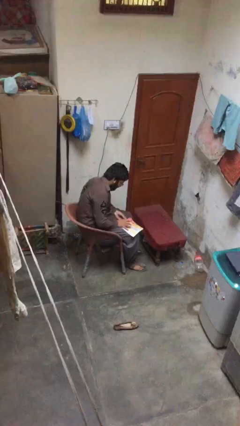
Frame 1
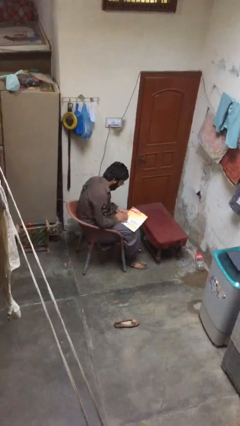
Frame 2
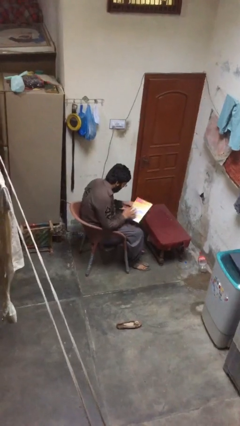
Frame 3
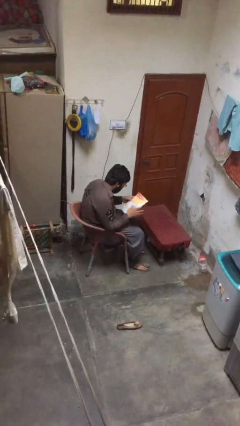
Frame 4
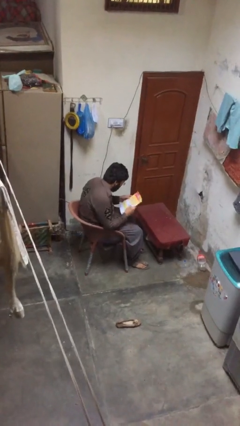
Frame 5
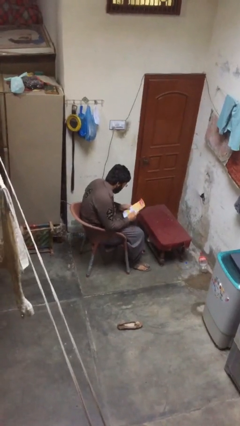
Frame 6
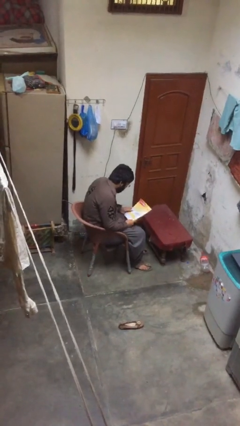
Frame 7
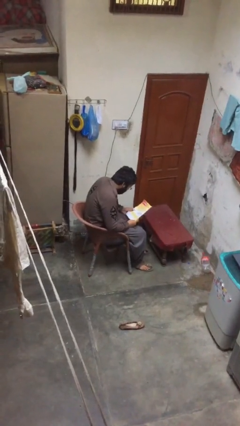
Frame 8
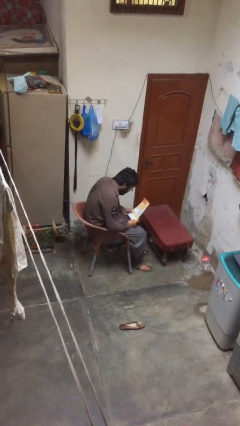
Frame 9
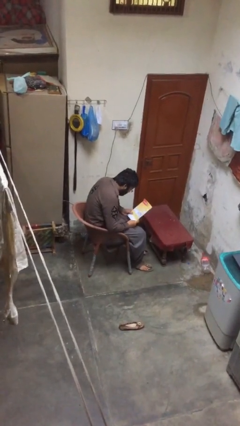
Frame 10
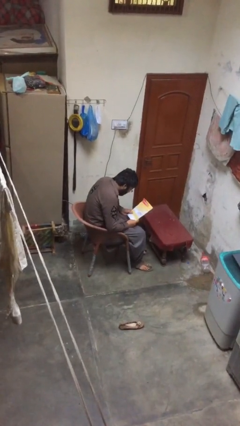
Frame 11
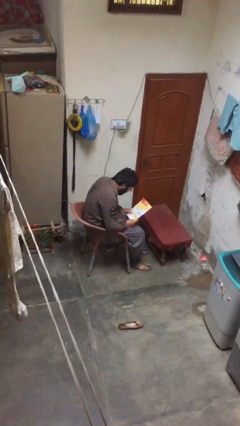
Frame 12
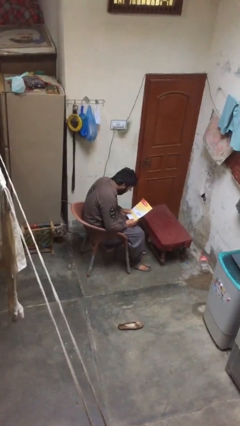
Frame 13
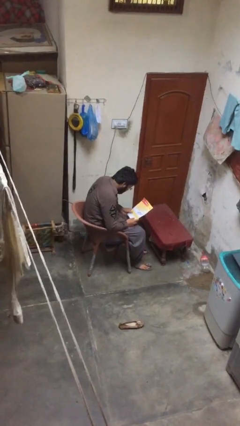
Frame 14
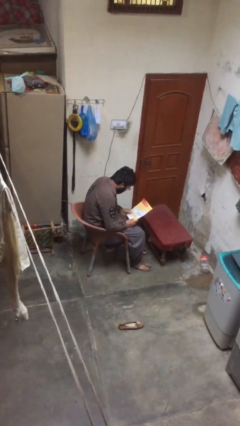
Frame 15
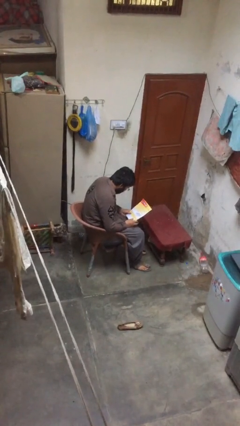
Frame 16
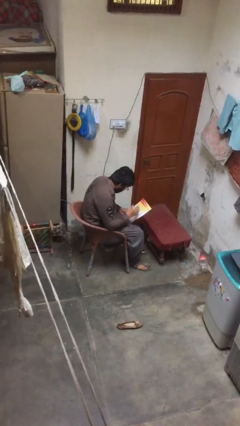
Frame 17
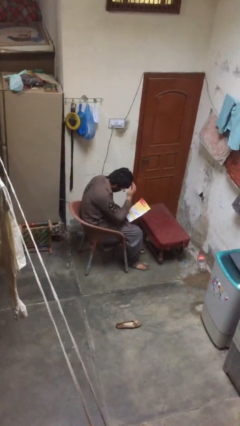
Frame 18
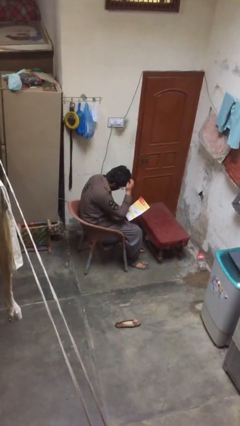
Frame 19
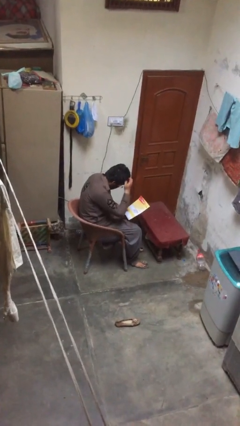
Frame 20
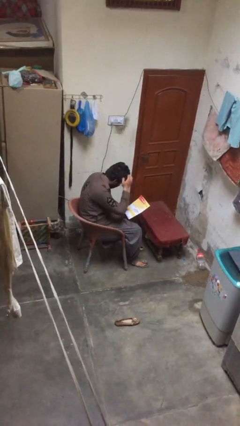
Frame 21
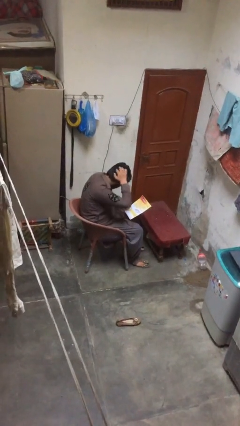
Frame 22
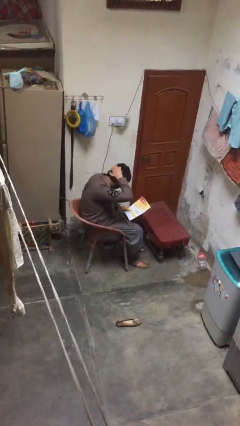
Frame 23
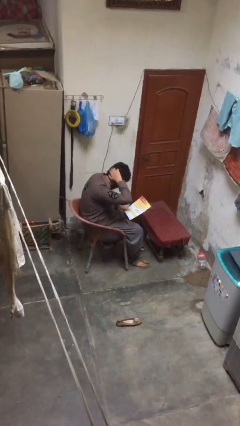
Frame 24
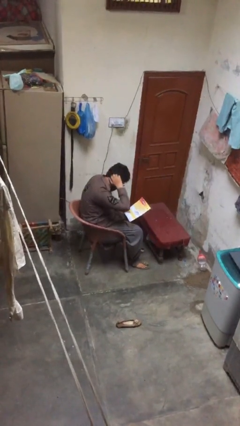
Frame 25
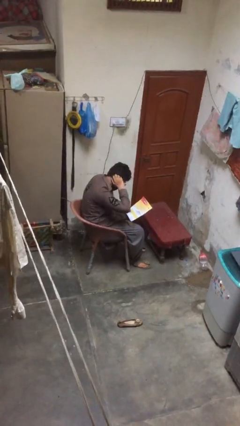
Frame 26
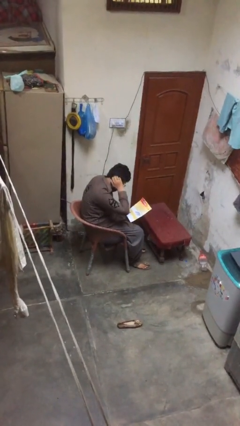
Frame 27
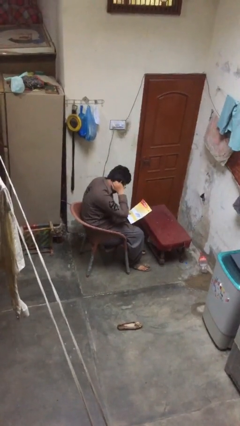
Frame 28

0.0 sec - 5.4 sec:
person reads document

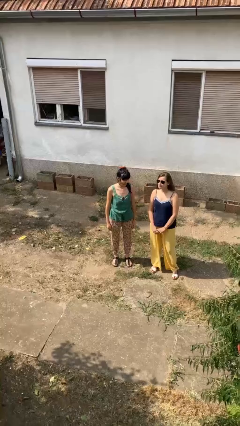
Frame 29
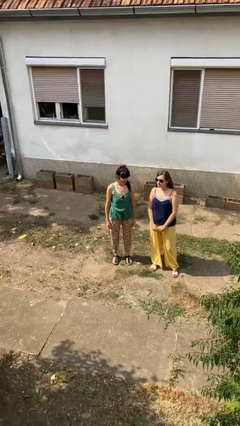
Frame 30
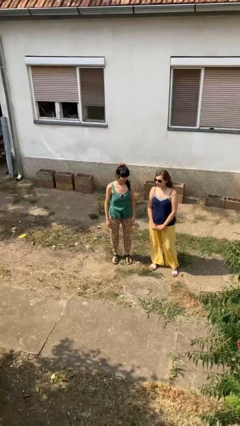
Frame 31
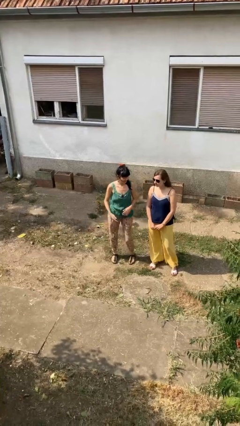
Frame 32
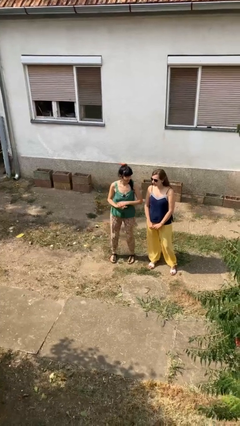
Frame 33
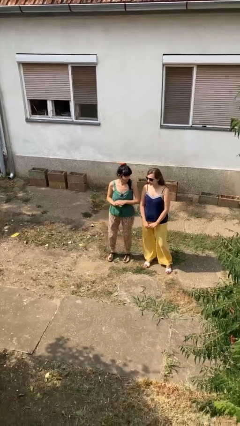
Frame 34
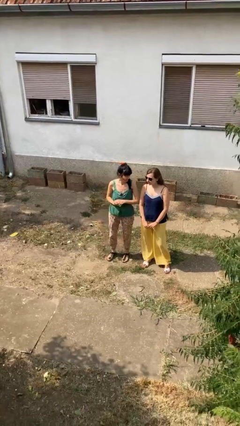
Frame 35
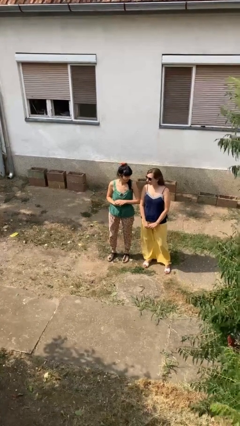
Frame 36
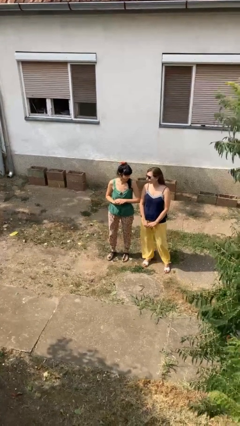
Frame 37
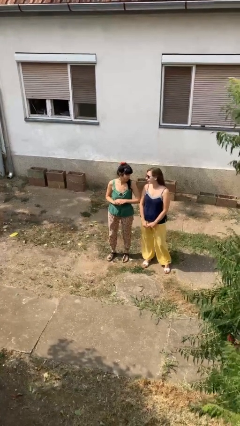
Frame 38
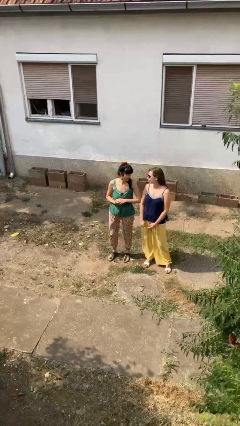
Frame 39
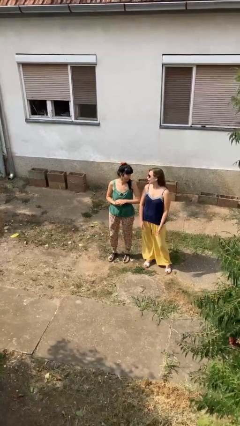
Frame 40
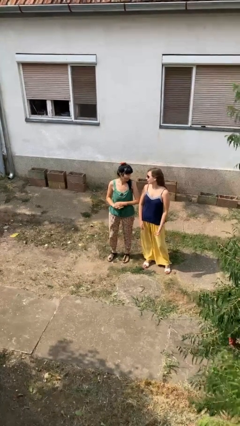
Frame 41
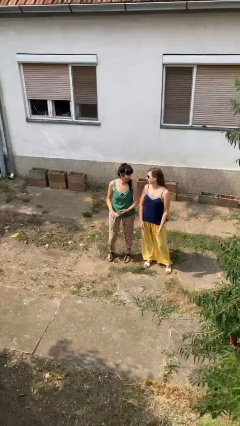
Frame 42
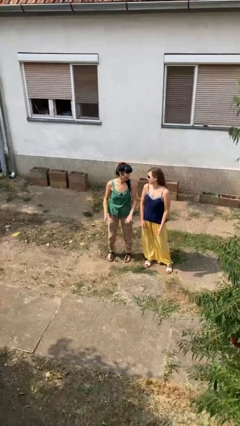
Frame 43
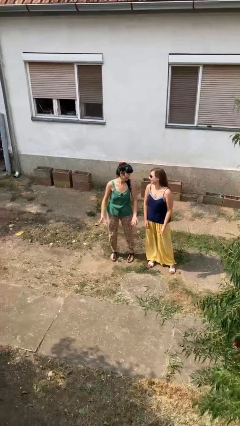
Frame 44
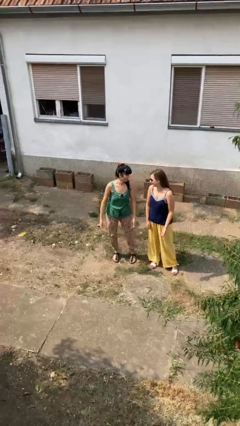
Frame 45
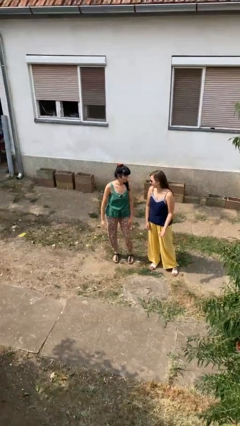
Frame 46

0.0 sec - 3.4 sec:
person nudges person with elbow

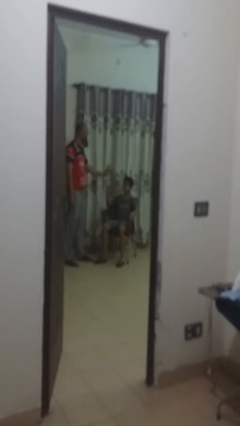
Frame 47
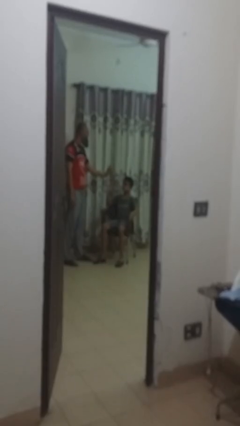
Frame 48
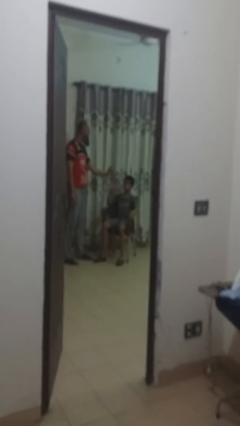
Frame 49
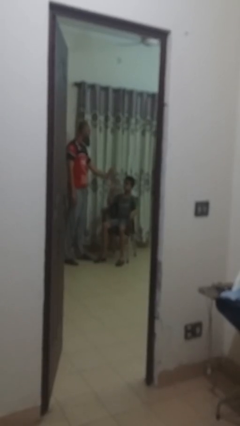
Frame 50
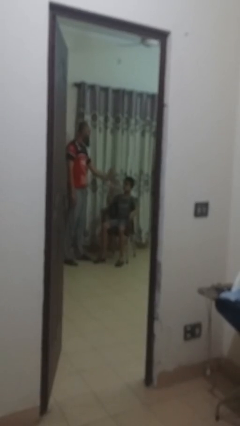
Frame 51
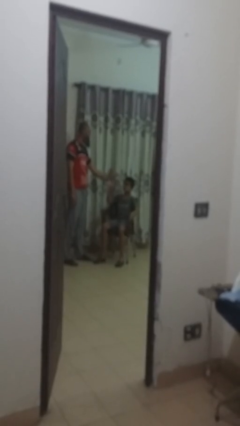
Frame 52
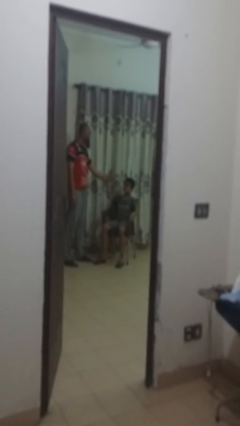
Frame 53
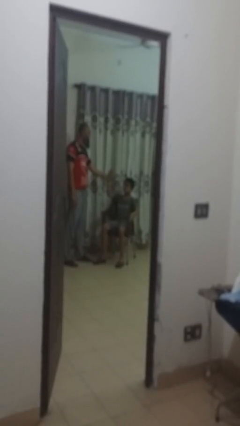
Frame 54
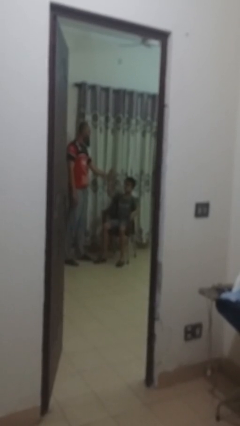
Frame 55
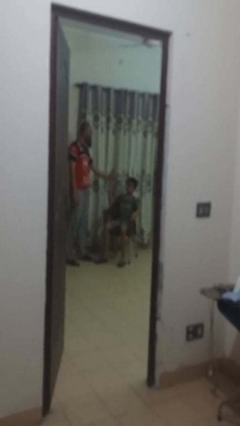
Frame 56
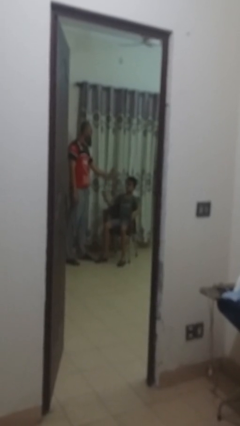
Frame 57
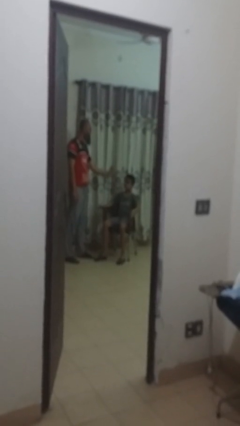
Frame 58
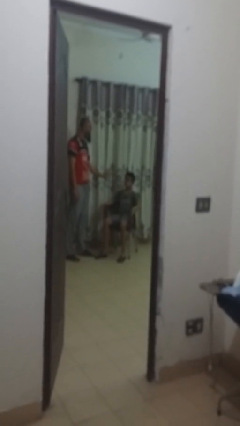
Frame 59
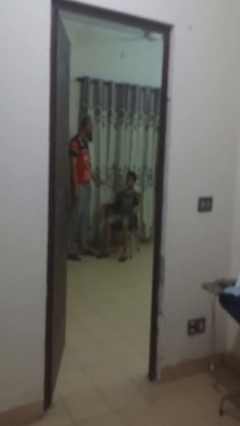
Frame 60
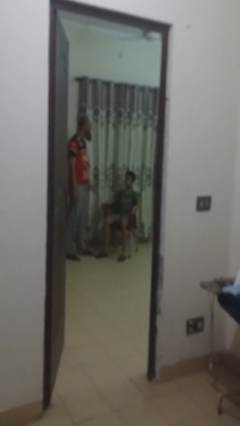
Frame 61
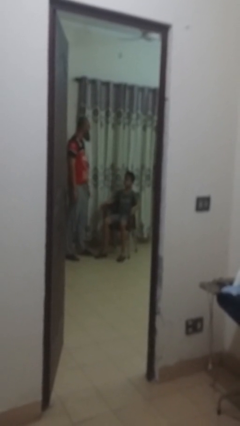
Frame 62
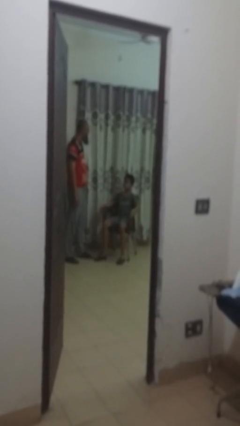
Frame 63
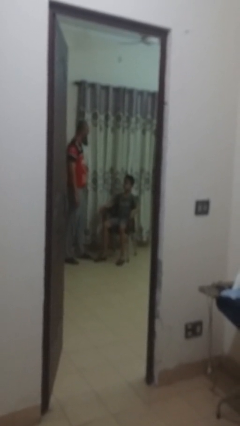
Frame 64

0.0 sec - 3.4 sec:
person highfives hand

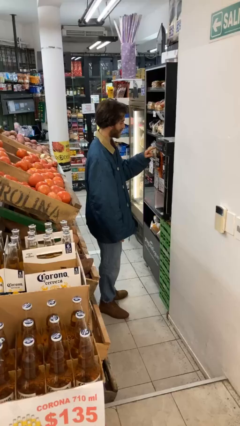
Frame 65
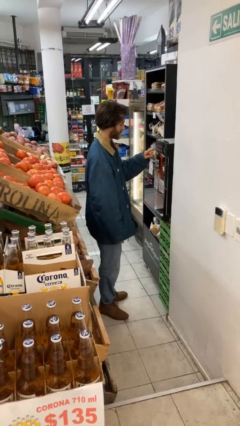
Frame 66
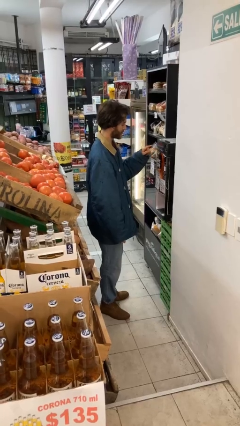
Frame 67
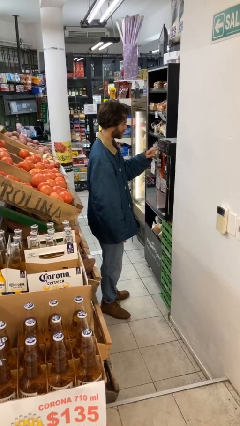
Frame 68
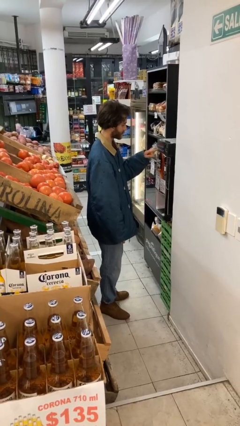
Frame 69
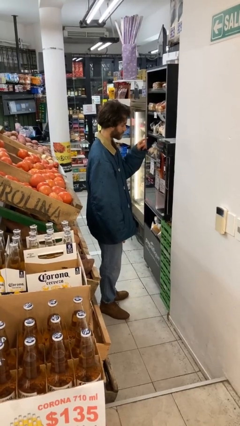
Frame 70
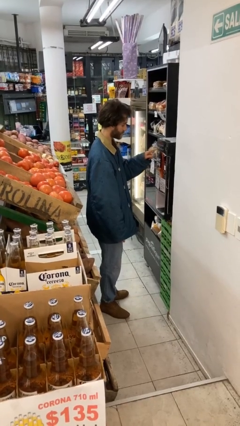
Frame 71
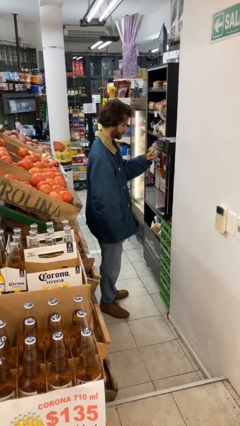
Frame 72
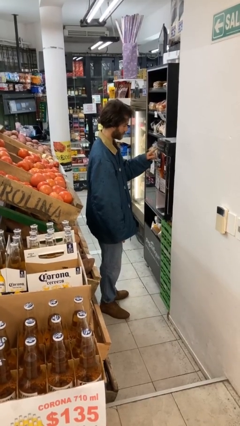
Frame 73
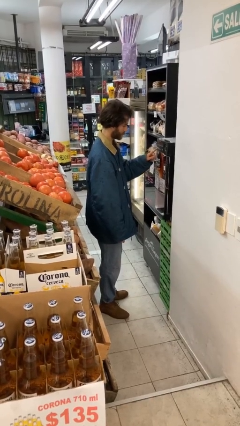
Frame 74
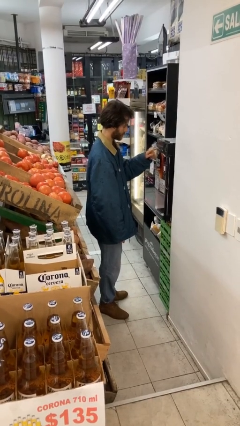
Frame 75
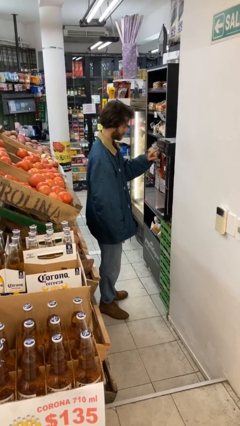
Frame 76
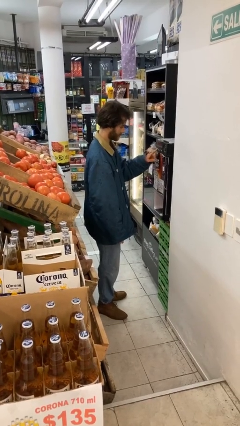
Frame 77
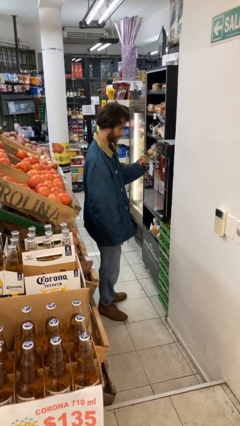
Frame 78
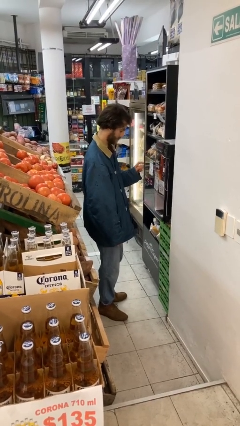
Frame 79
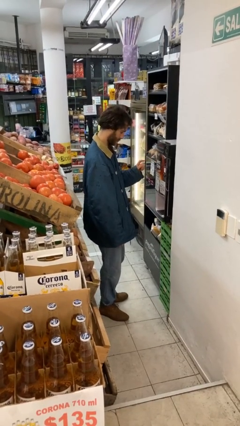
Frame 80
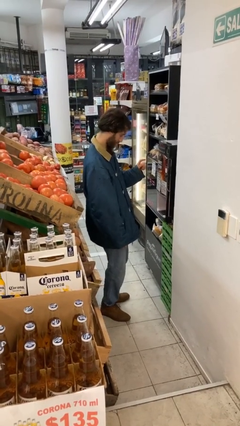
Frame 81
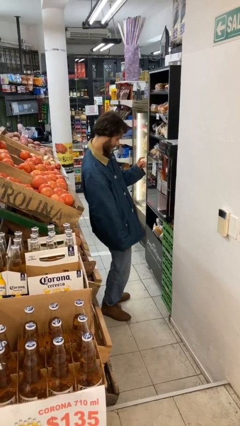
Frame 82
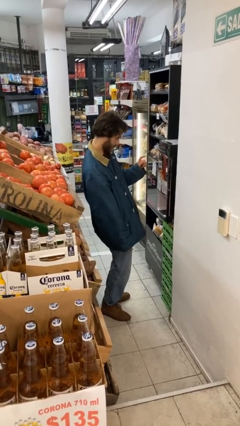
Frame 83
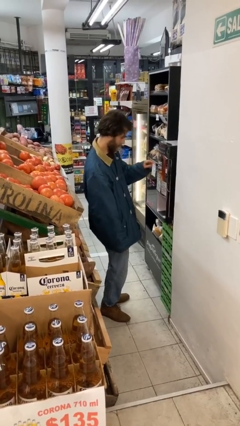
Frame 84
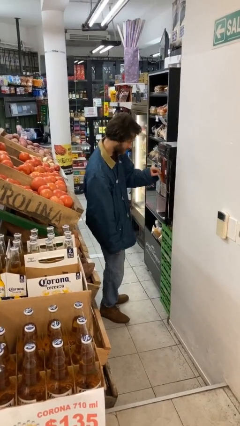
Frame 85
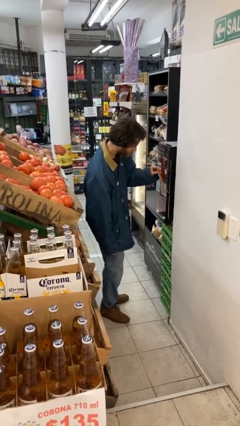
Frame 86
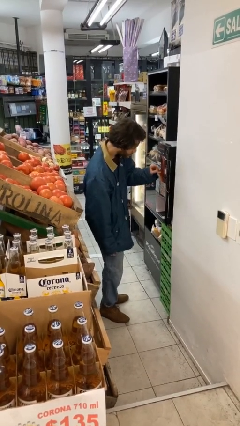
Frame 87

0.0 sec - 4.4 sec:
person purchases from machine

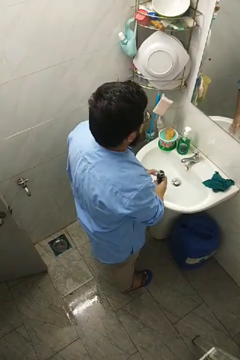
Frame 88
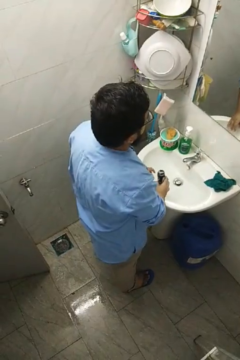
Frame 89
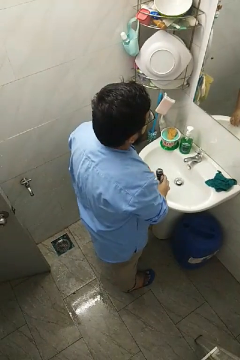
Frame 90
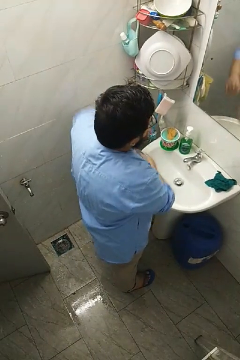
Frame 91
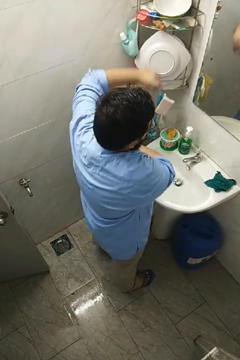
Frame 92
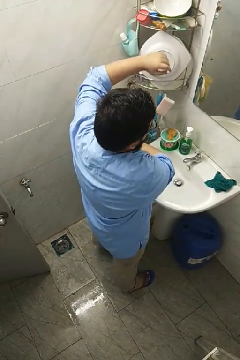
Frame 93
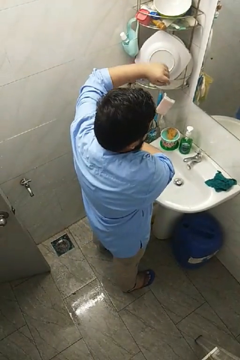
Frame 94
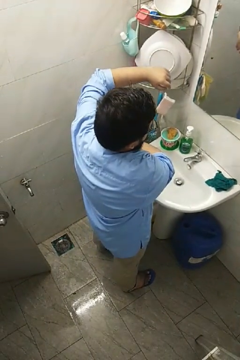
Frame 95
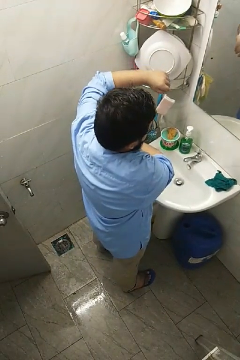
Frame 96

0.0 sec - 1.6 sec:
person applies deodorant
